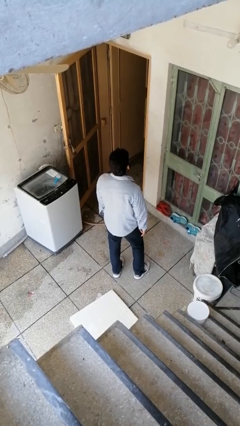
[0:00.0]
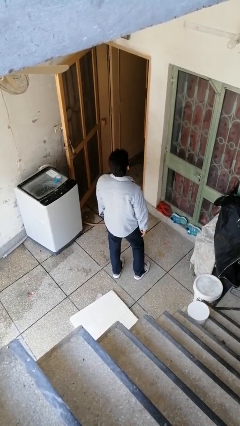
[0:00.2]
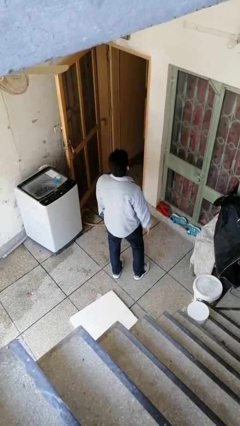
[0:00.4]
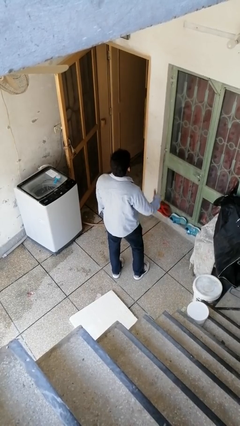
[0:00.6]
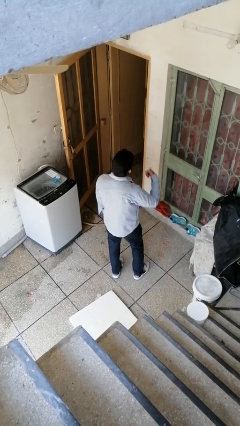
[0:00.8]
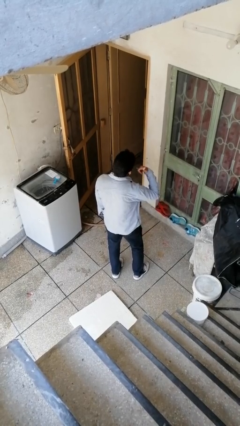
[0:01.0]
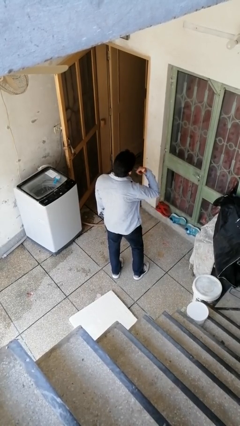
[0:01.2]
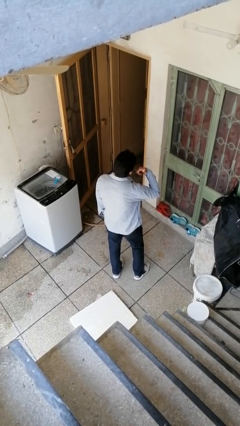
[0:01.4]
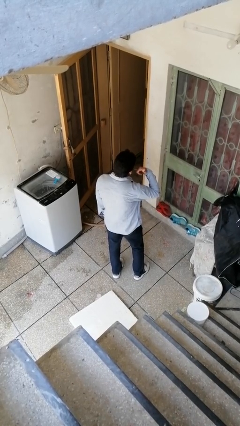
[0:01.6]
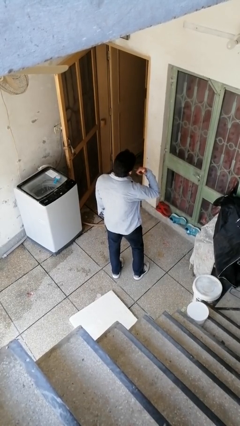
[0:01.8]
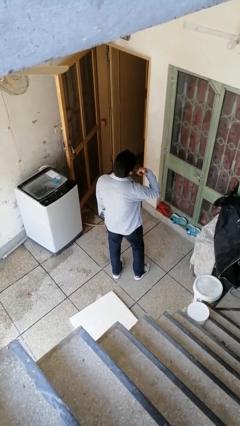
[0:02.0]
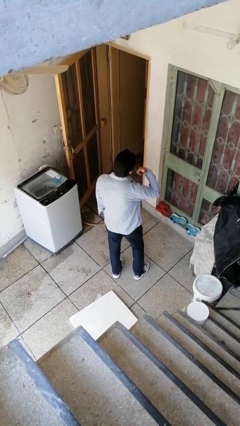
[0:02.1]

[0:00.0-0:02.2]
person gestures call me

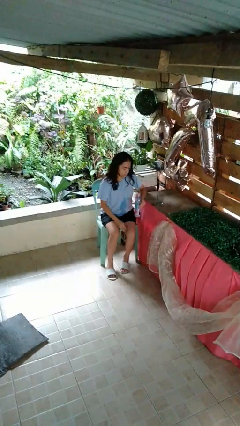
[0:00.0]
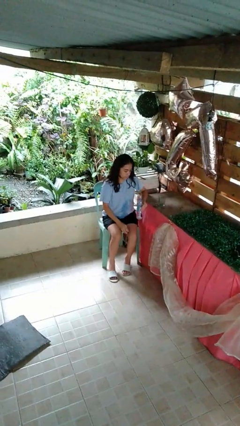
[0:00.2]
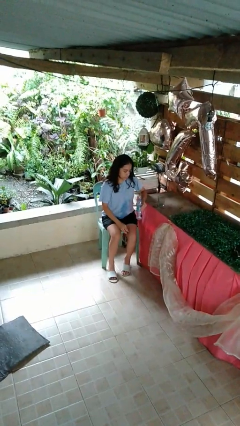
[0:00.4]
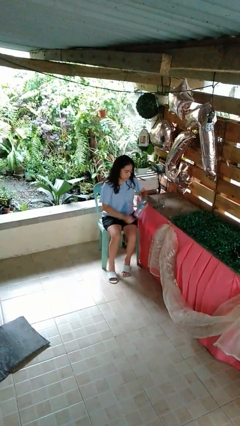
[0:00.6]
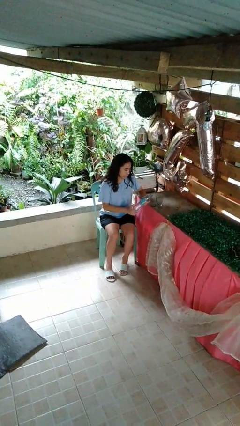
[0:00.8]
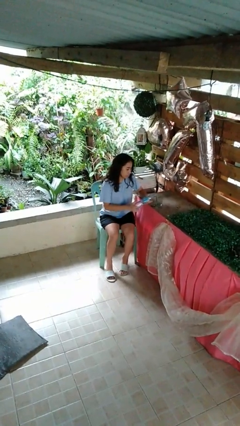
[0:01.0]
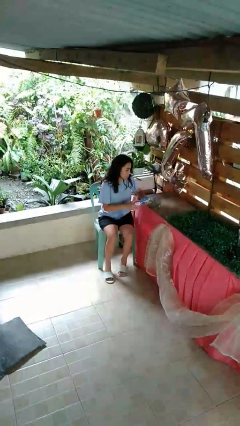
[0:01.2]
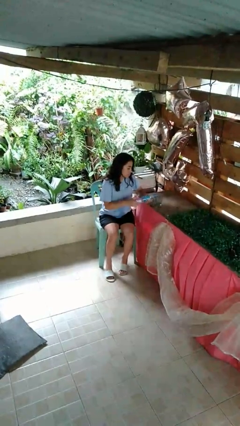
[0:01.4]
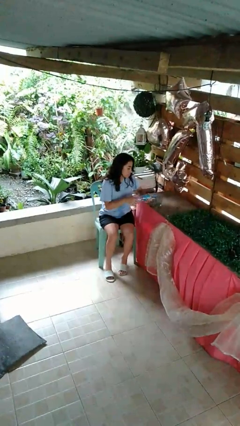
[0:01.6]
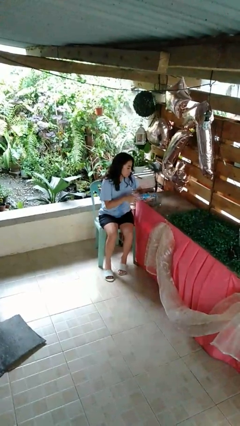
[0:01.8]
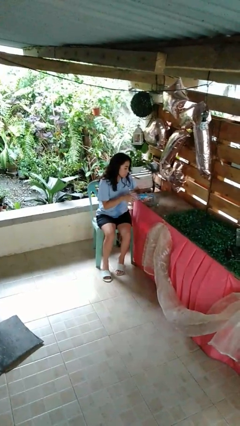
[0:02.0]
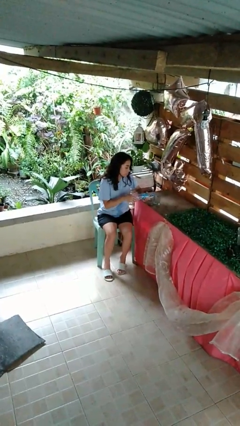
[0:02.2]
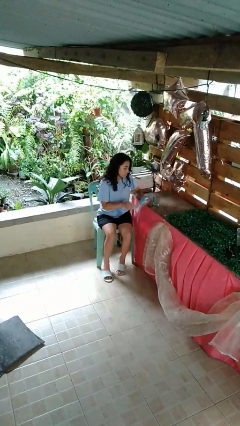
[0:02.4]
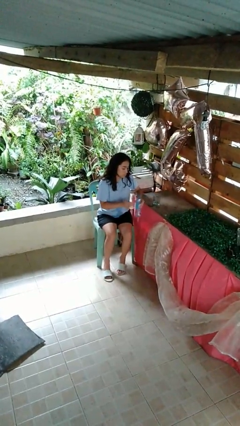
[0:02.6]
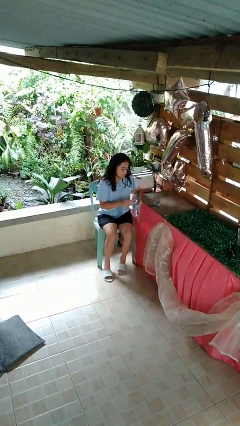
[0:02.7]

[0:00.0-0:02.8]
person pours liquid into cup

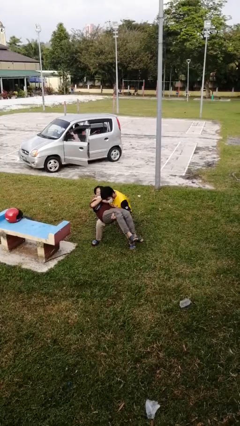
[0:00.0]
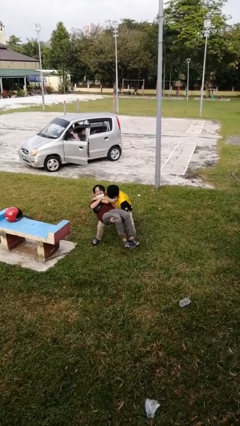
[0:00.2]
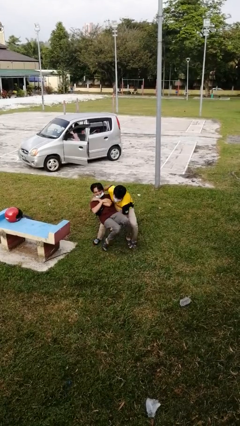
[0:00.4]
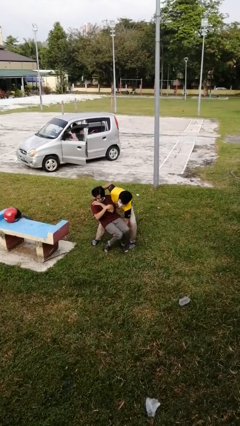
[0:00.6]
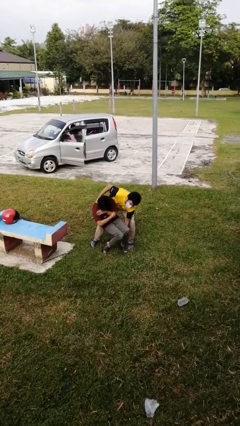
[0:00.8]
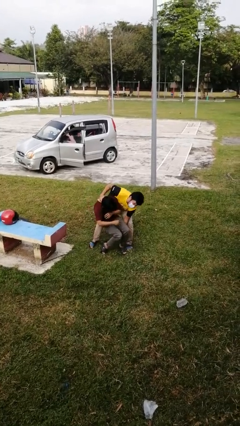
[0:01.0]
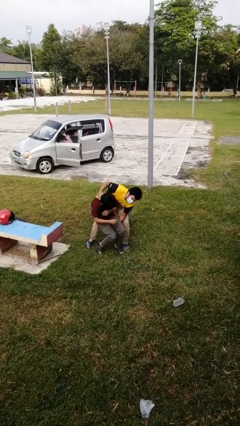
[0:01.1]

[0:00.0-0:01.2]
person puts down person

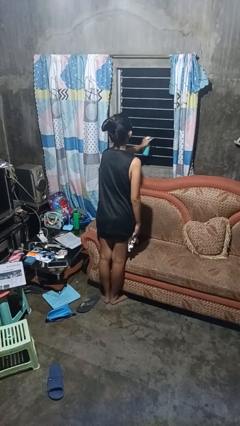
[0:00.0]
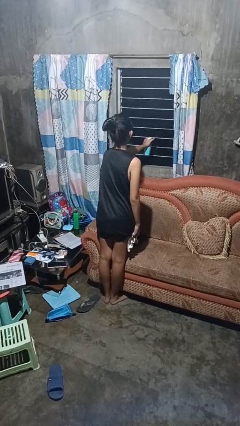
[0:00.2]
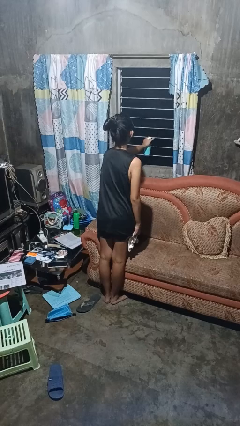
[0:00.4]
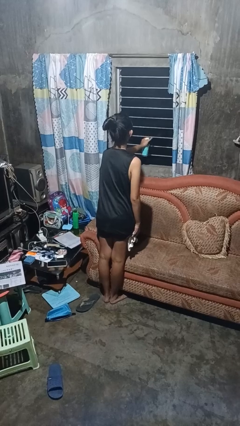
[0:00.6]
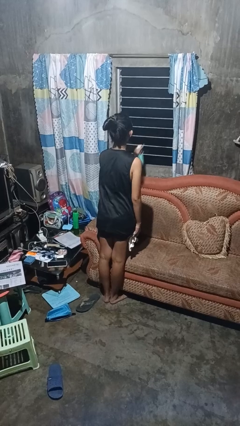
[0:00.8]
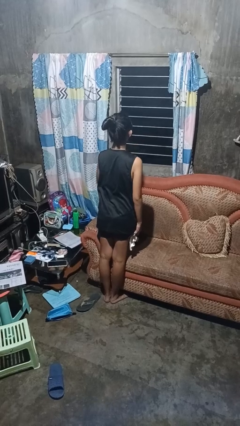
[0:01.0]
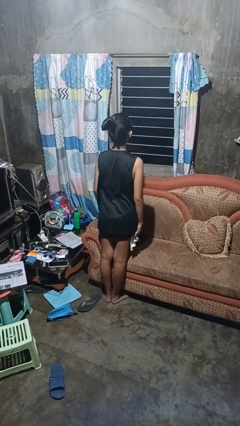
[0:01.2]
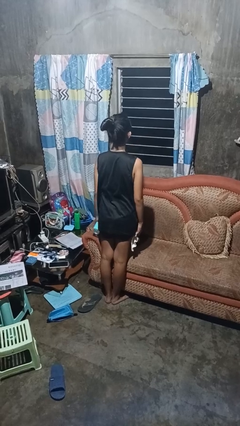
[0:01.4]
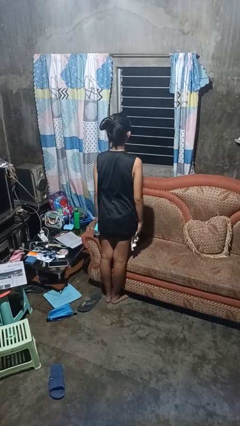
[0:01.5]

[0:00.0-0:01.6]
person sprays from bottle

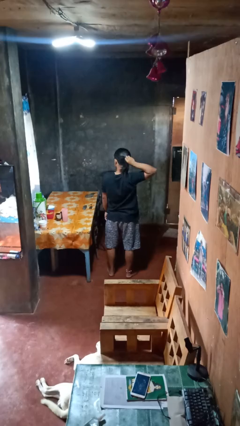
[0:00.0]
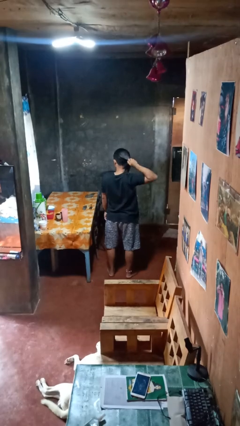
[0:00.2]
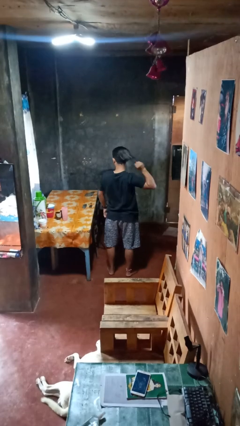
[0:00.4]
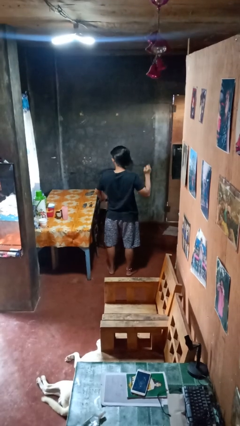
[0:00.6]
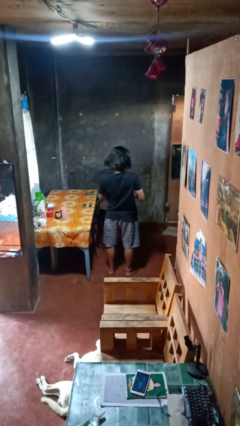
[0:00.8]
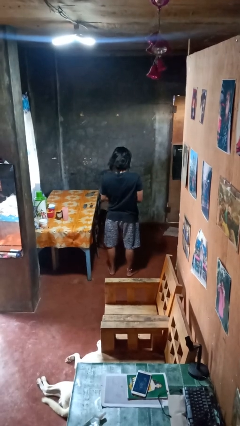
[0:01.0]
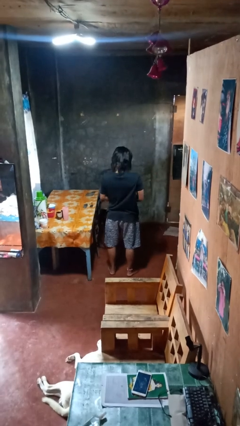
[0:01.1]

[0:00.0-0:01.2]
person takes off hairtie

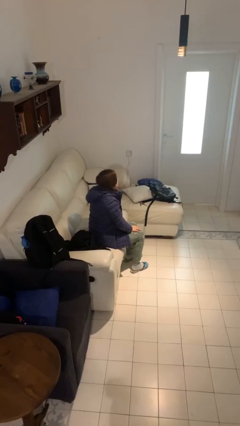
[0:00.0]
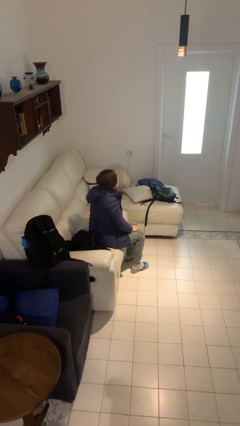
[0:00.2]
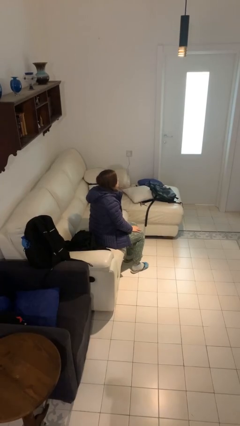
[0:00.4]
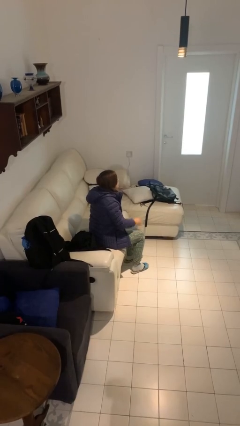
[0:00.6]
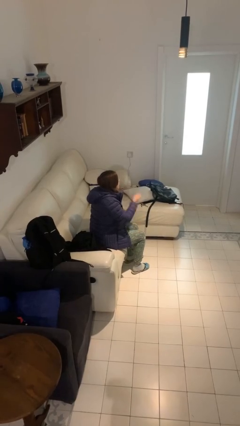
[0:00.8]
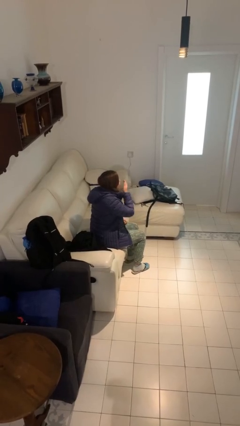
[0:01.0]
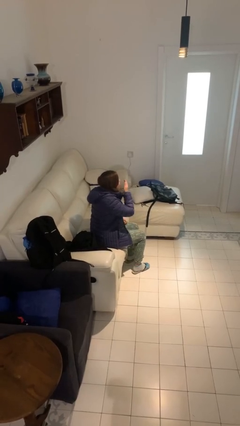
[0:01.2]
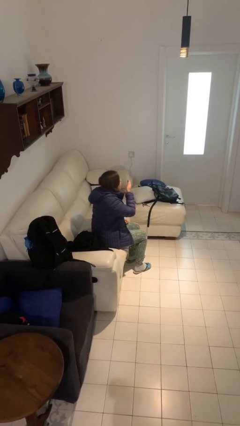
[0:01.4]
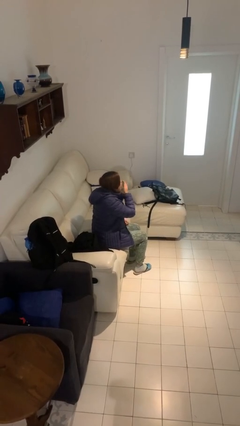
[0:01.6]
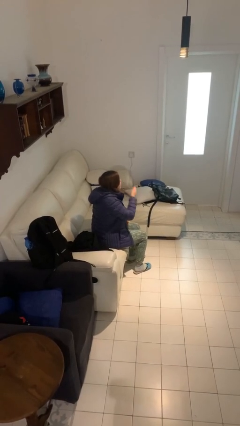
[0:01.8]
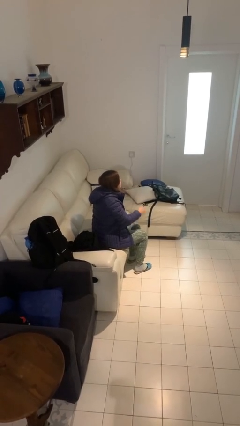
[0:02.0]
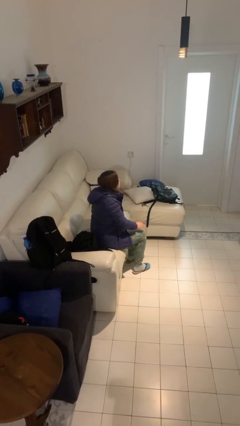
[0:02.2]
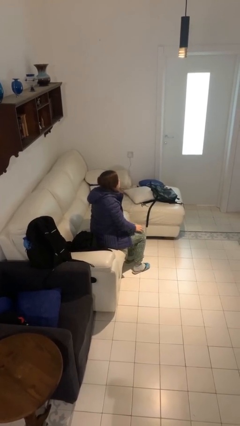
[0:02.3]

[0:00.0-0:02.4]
person yawns

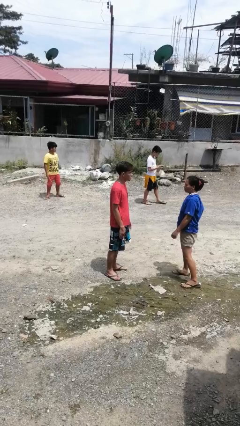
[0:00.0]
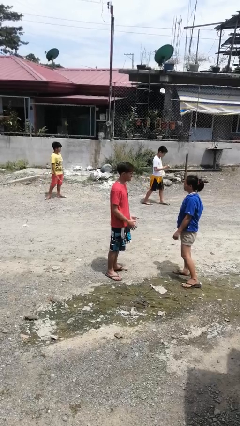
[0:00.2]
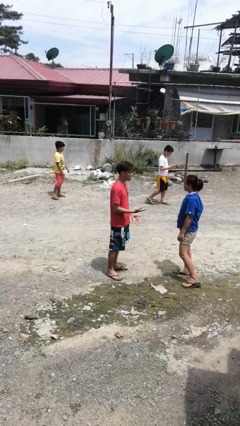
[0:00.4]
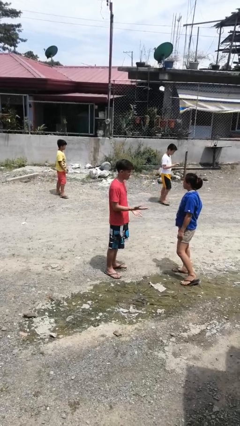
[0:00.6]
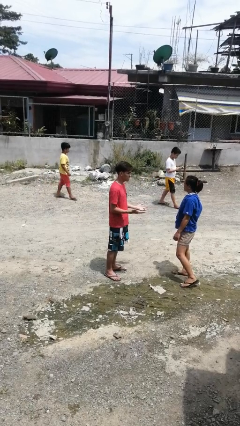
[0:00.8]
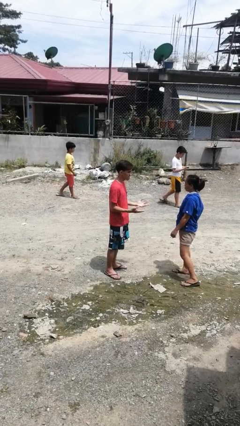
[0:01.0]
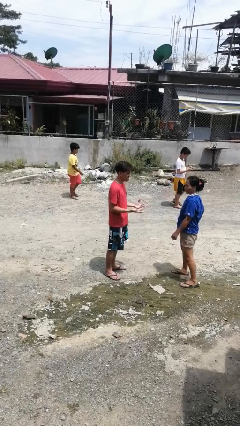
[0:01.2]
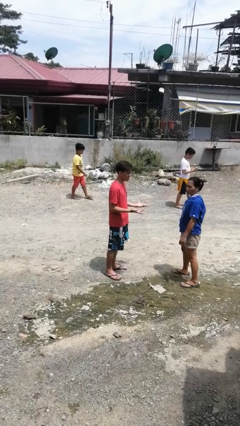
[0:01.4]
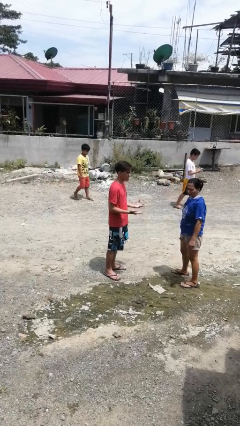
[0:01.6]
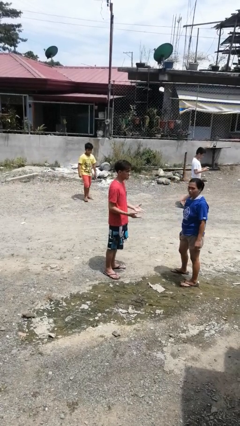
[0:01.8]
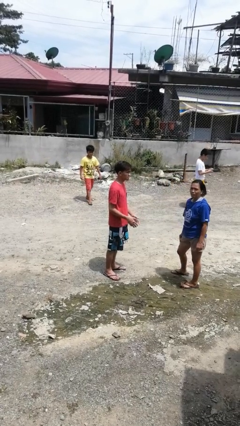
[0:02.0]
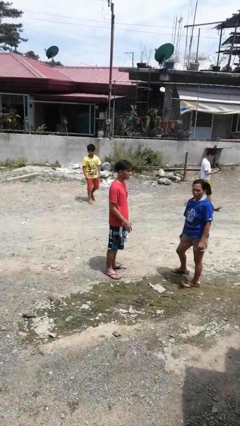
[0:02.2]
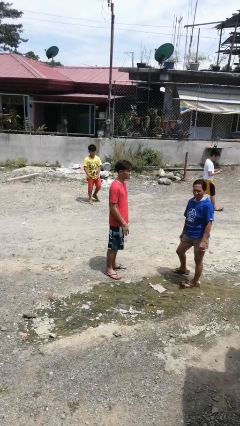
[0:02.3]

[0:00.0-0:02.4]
person talks to person

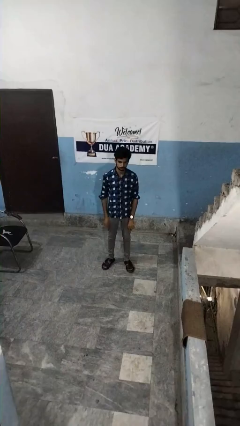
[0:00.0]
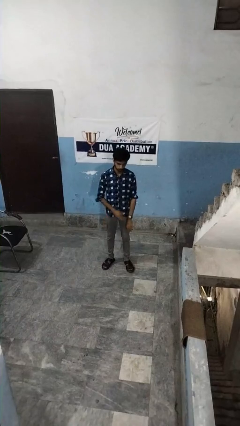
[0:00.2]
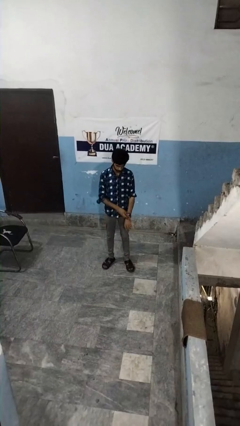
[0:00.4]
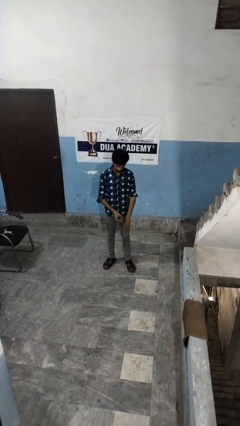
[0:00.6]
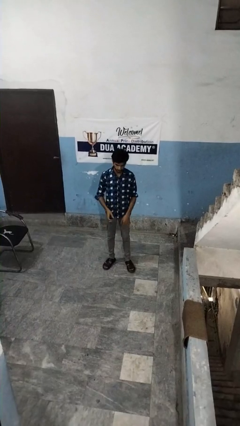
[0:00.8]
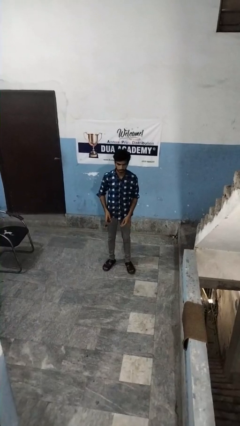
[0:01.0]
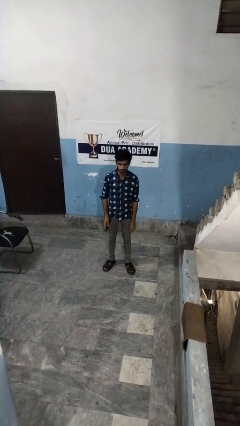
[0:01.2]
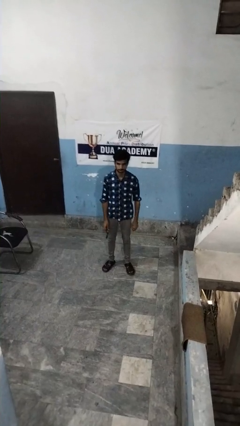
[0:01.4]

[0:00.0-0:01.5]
person takes off wristwatch

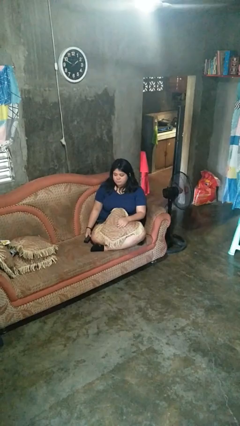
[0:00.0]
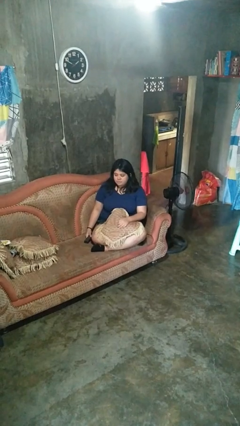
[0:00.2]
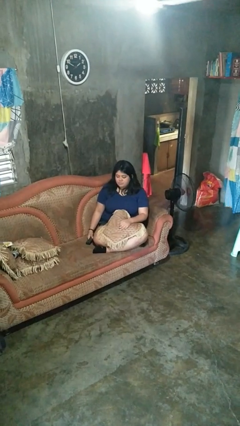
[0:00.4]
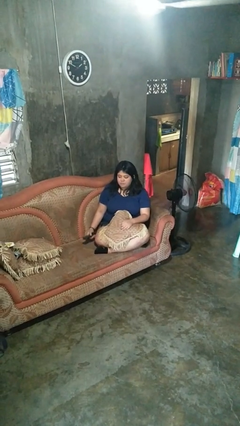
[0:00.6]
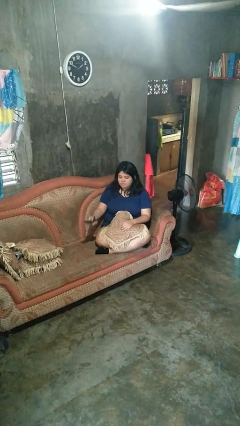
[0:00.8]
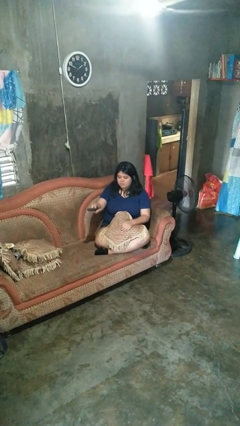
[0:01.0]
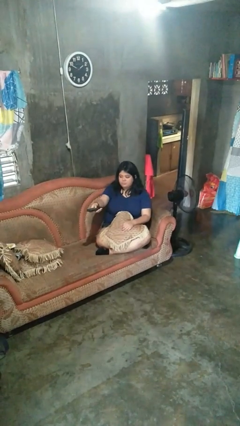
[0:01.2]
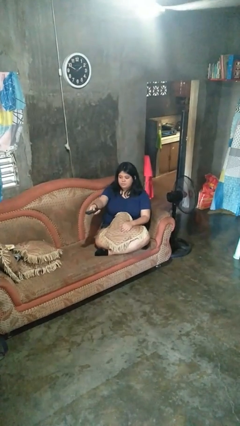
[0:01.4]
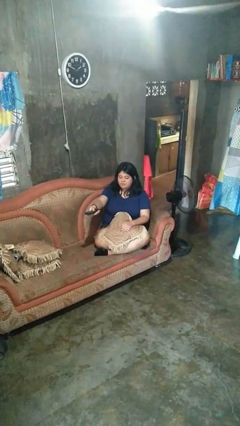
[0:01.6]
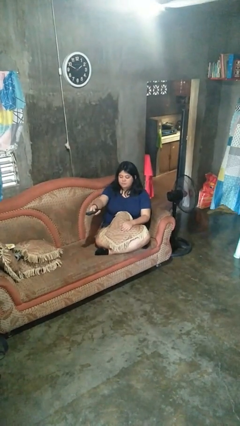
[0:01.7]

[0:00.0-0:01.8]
person uses television remote
